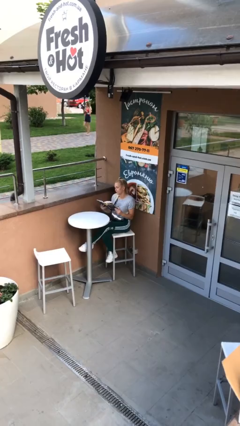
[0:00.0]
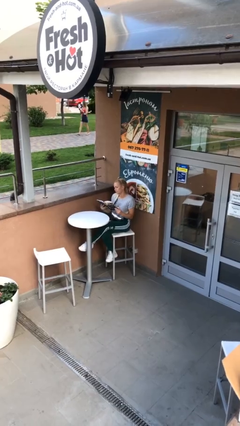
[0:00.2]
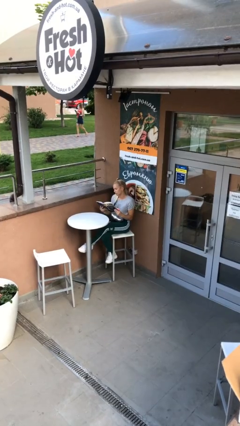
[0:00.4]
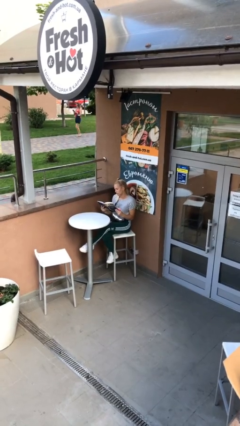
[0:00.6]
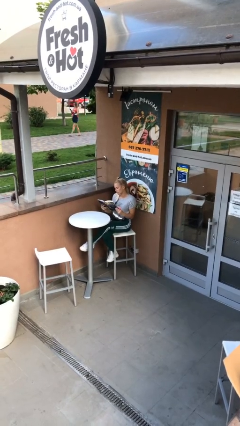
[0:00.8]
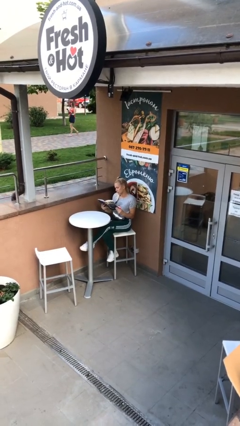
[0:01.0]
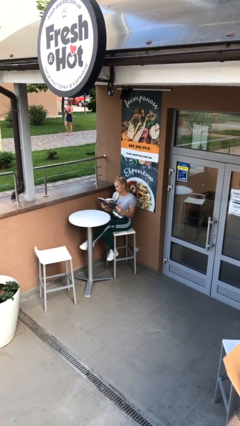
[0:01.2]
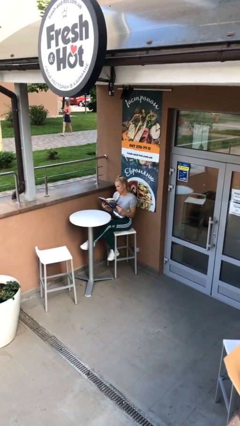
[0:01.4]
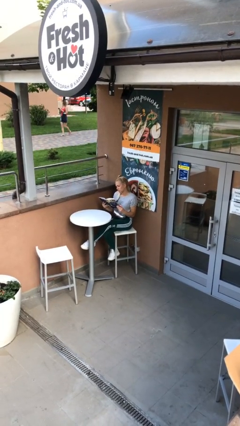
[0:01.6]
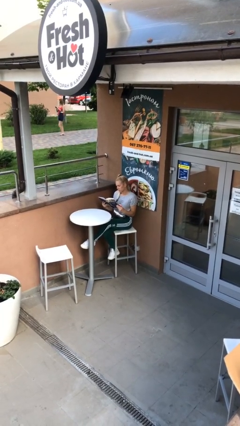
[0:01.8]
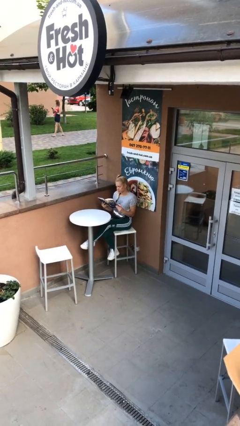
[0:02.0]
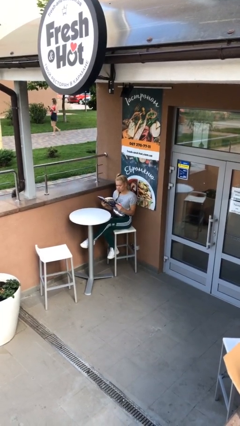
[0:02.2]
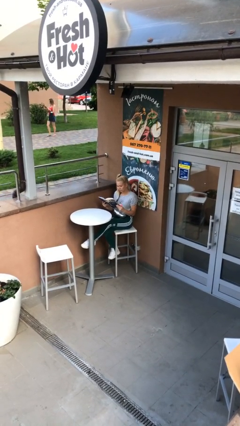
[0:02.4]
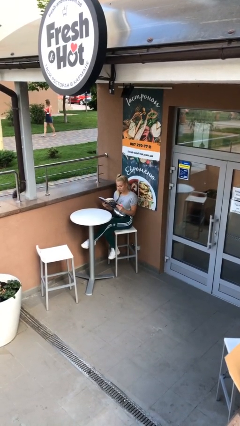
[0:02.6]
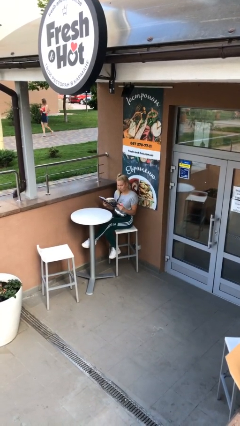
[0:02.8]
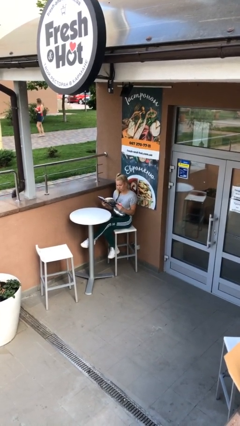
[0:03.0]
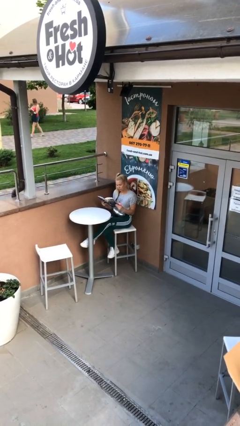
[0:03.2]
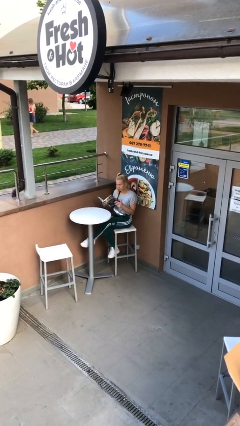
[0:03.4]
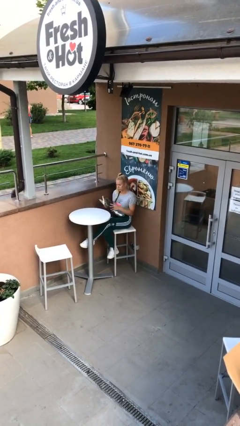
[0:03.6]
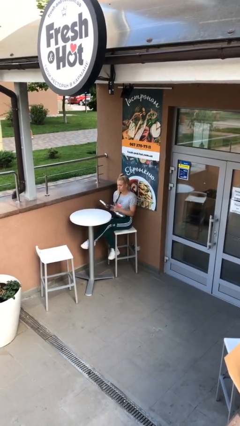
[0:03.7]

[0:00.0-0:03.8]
person reads document

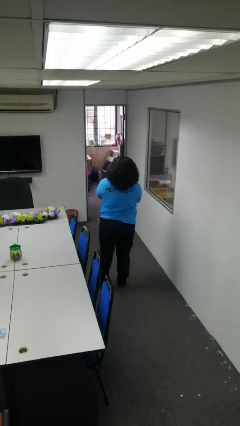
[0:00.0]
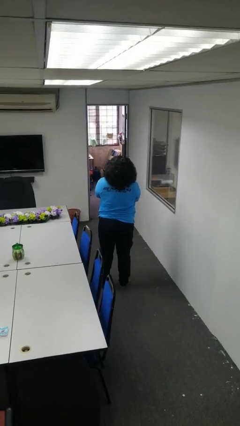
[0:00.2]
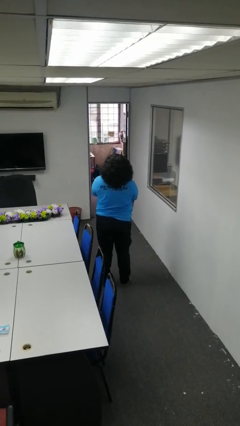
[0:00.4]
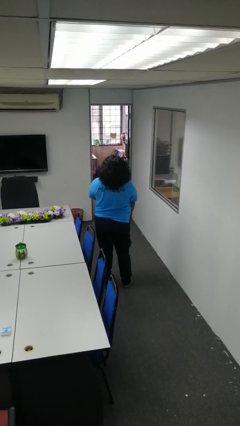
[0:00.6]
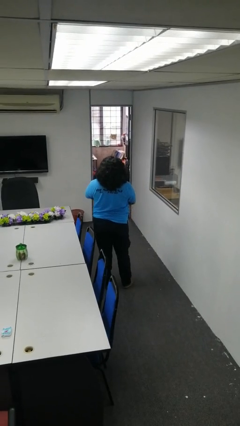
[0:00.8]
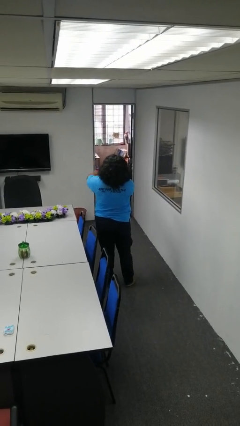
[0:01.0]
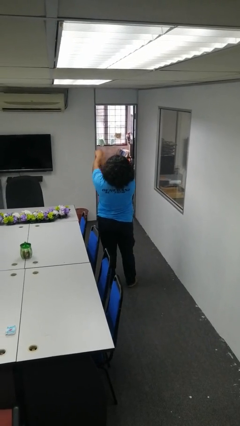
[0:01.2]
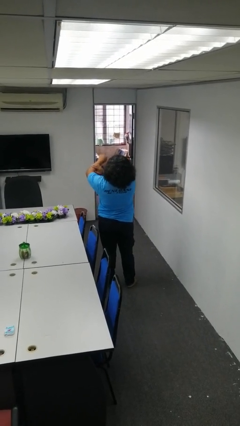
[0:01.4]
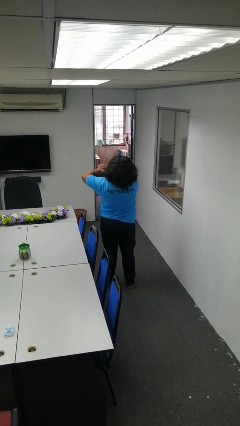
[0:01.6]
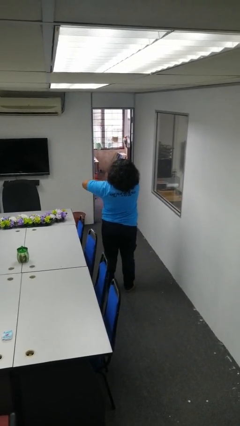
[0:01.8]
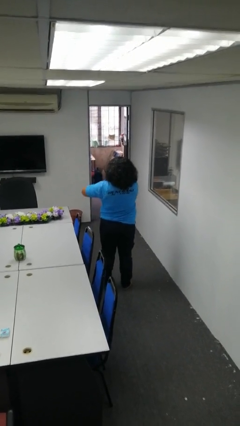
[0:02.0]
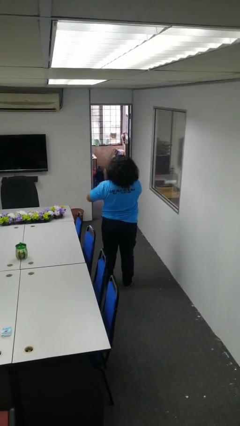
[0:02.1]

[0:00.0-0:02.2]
person swats bug

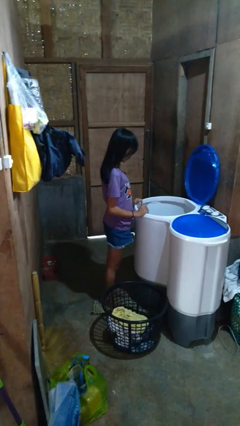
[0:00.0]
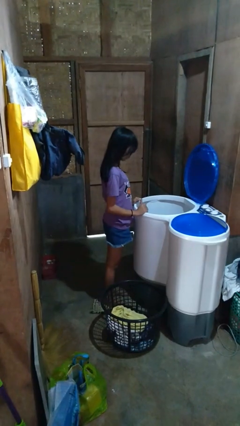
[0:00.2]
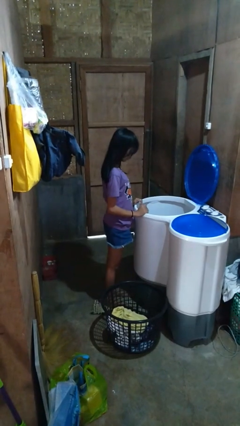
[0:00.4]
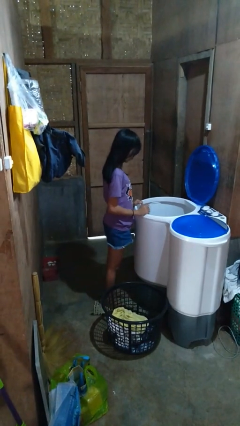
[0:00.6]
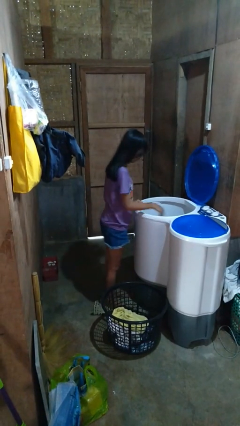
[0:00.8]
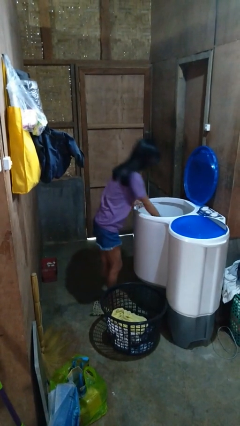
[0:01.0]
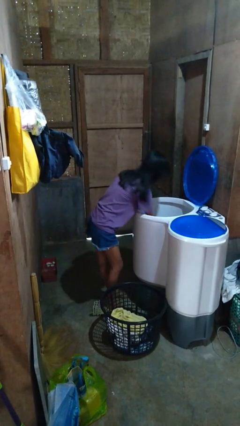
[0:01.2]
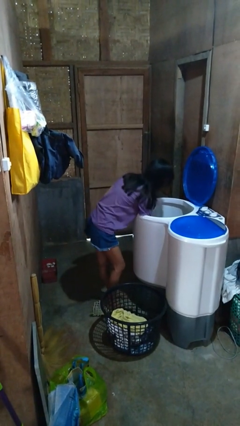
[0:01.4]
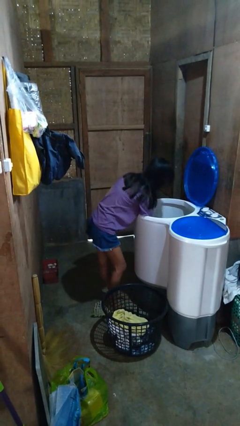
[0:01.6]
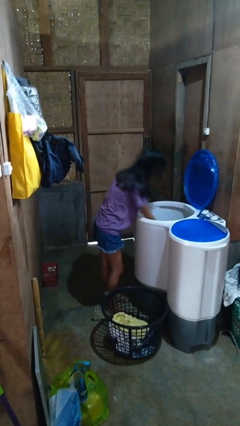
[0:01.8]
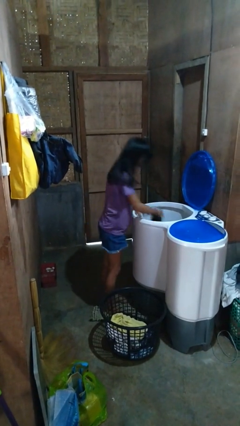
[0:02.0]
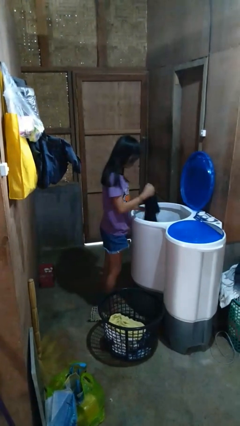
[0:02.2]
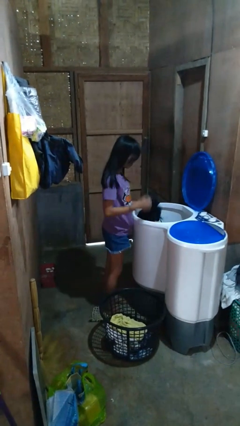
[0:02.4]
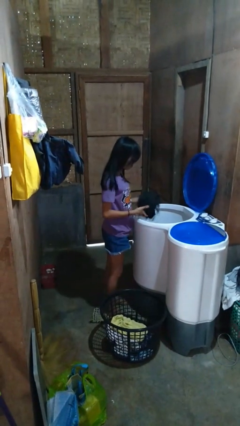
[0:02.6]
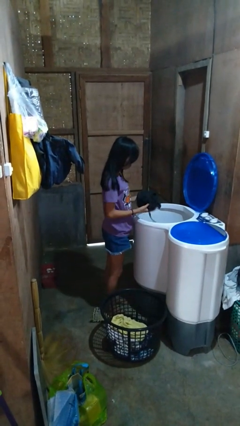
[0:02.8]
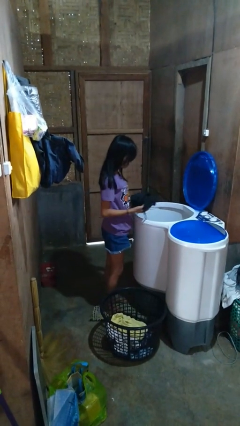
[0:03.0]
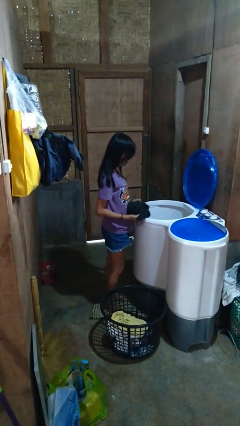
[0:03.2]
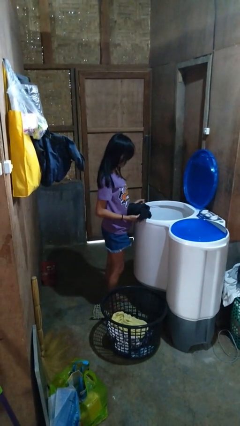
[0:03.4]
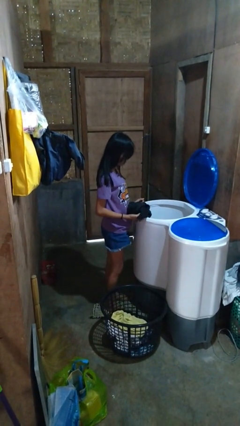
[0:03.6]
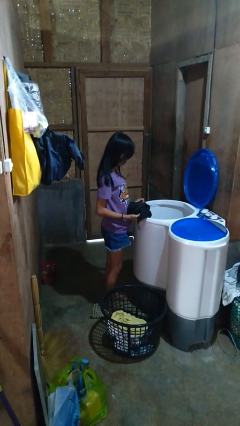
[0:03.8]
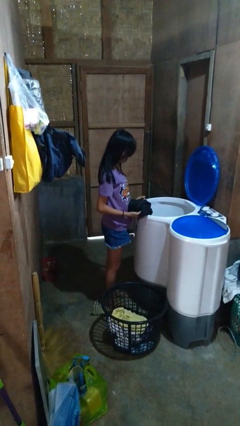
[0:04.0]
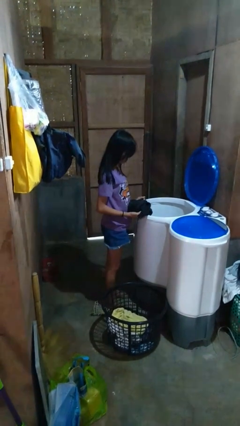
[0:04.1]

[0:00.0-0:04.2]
person loads clotheswasher

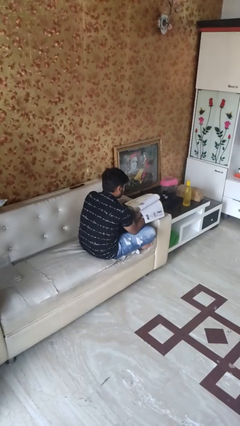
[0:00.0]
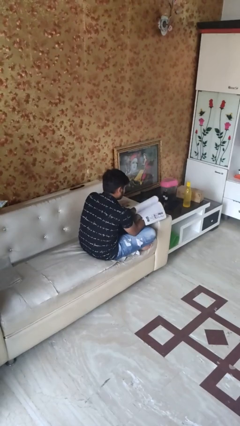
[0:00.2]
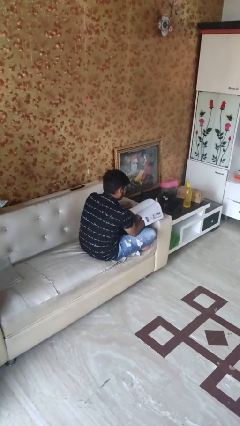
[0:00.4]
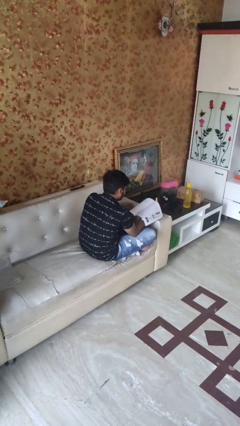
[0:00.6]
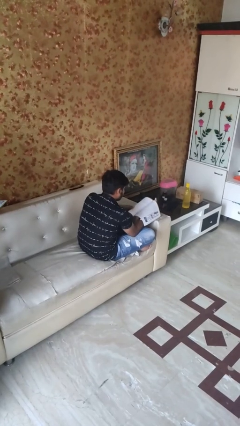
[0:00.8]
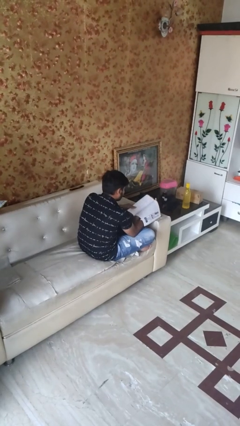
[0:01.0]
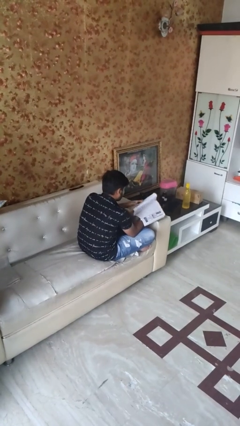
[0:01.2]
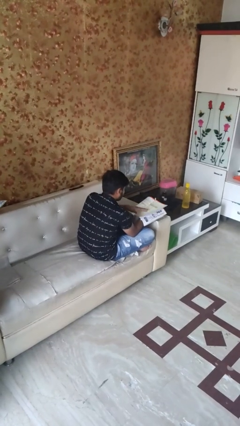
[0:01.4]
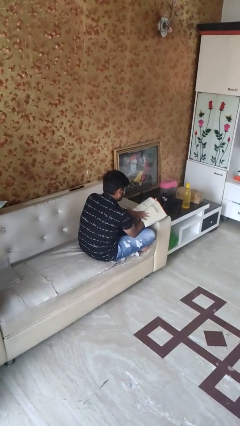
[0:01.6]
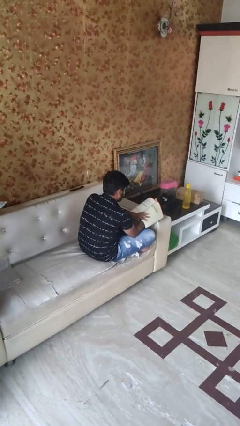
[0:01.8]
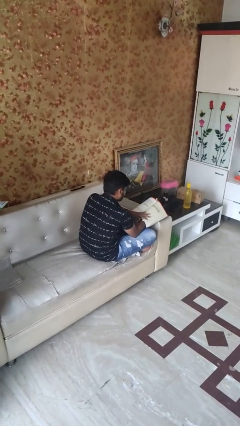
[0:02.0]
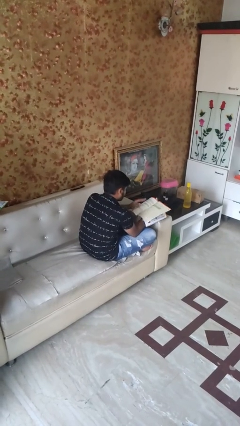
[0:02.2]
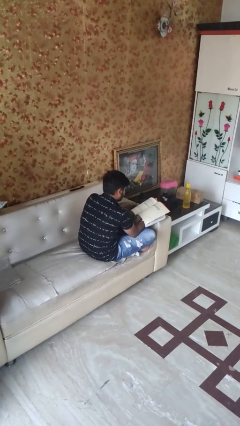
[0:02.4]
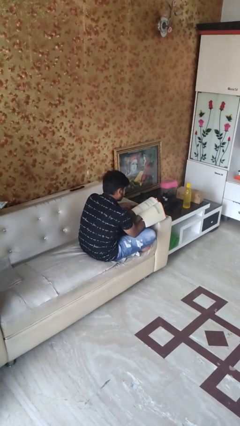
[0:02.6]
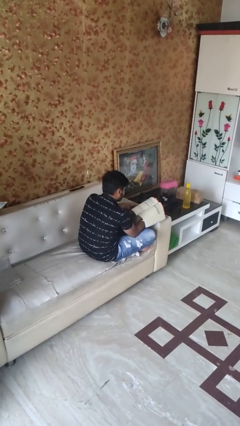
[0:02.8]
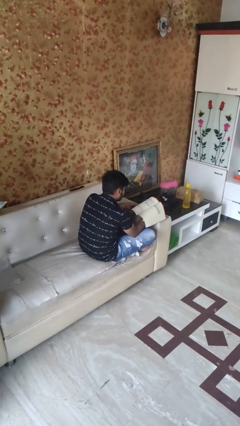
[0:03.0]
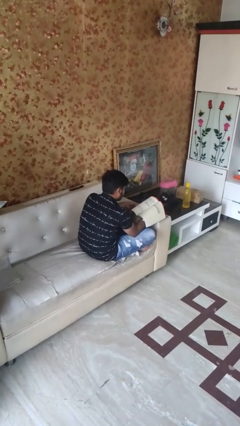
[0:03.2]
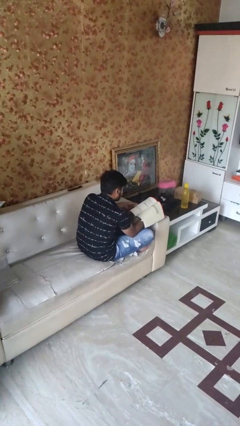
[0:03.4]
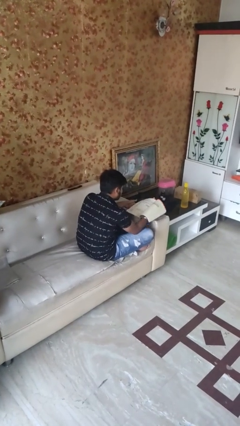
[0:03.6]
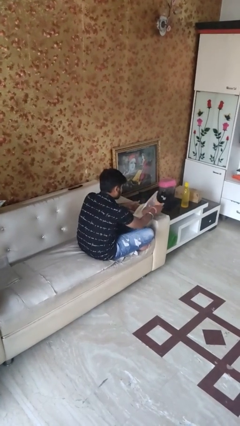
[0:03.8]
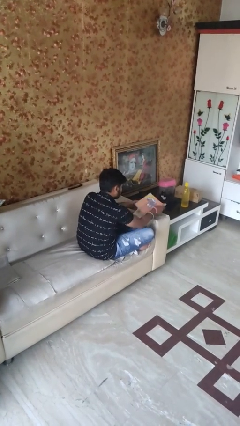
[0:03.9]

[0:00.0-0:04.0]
person reads magazine

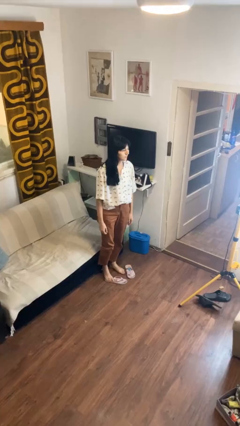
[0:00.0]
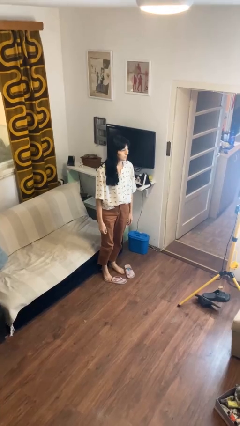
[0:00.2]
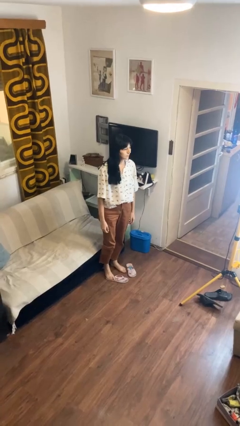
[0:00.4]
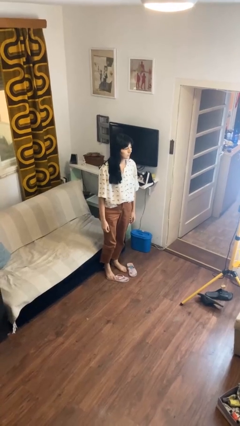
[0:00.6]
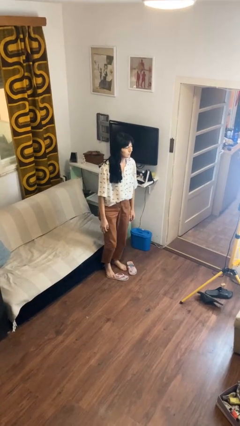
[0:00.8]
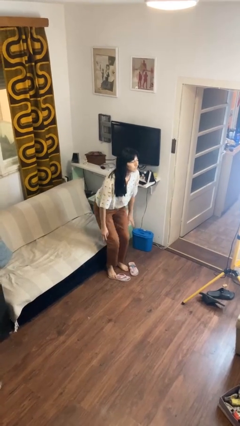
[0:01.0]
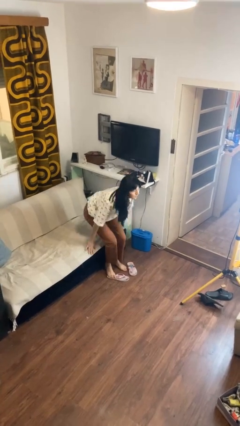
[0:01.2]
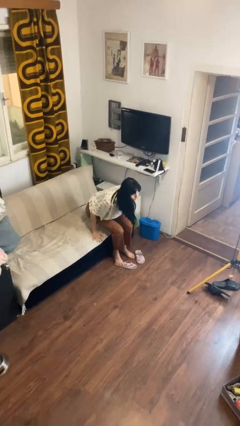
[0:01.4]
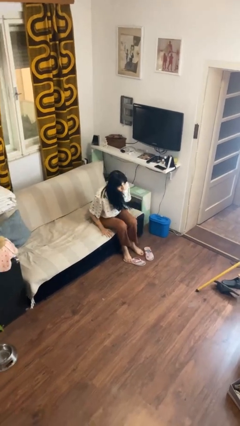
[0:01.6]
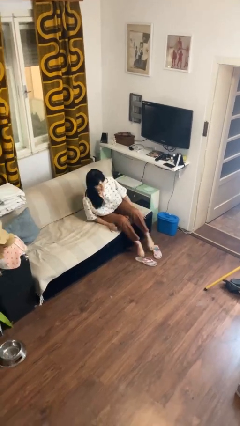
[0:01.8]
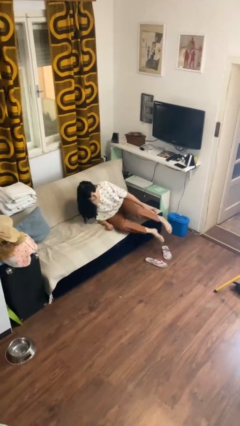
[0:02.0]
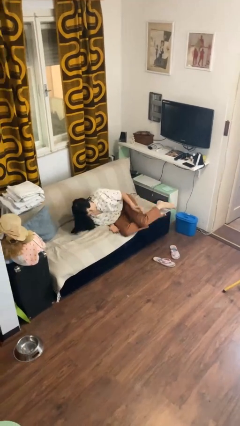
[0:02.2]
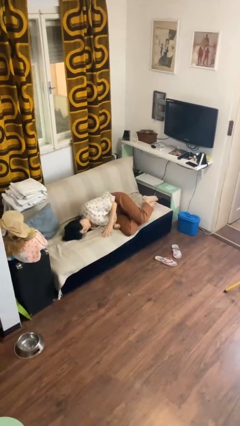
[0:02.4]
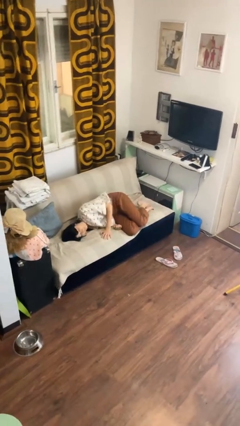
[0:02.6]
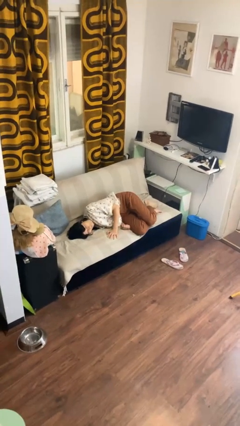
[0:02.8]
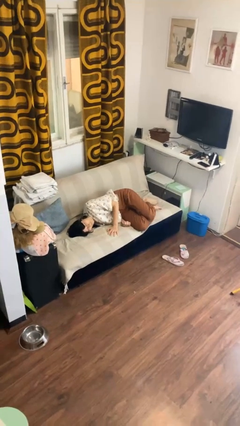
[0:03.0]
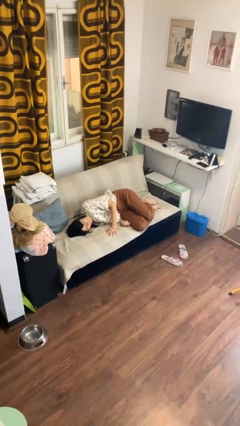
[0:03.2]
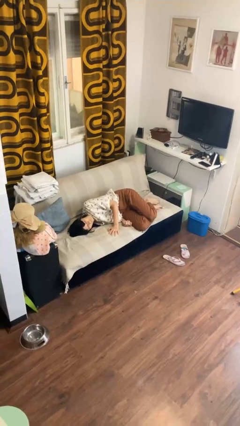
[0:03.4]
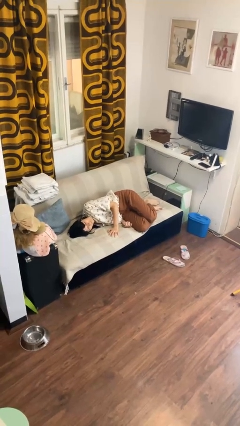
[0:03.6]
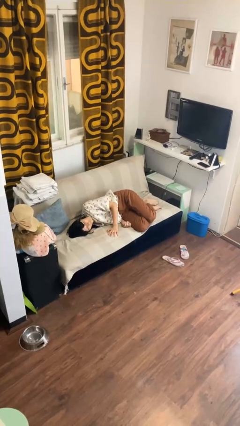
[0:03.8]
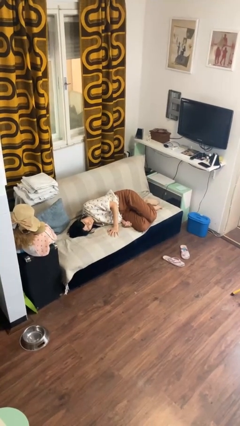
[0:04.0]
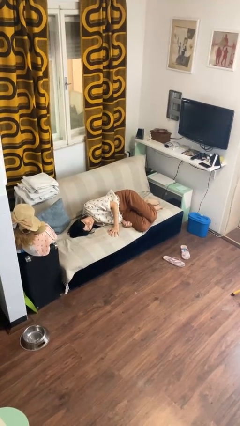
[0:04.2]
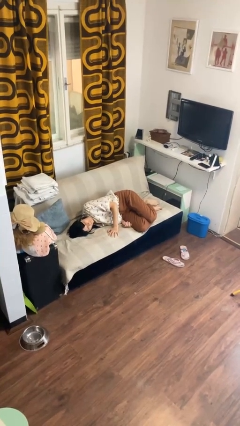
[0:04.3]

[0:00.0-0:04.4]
person lies down on couch
